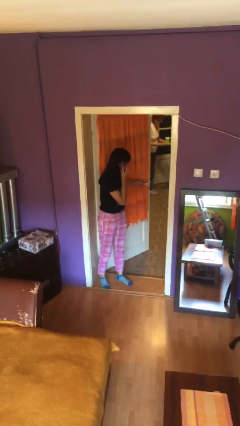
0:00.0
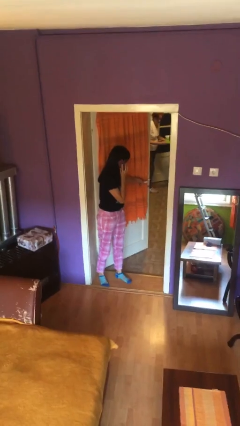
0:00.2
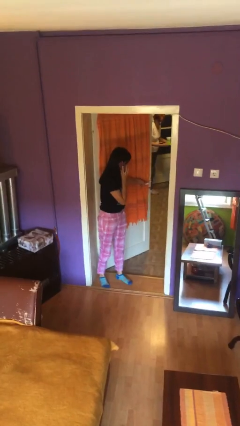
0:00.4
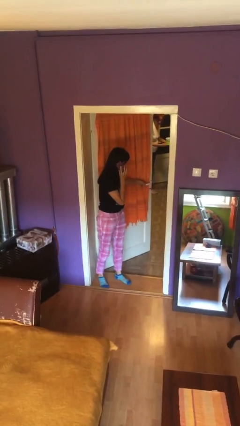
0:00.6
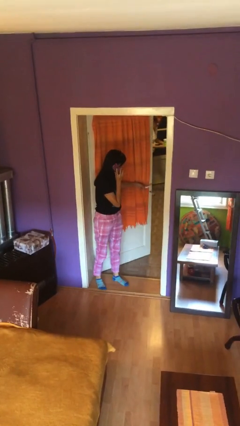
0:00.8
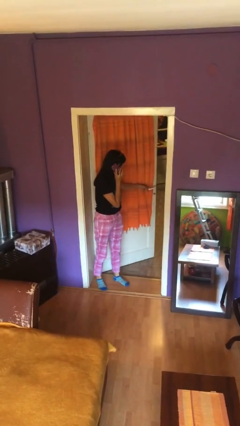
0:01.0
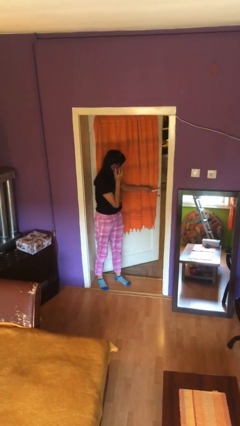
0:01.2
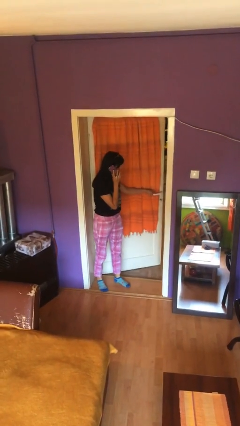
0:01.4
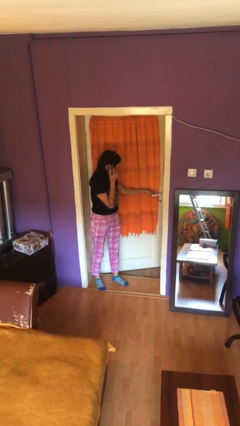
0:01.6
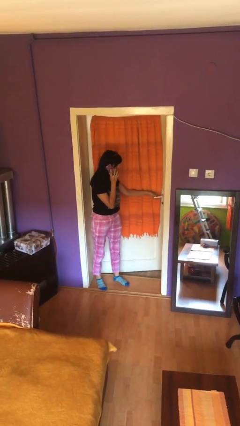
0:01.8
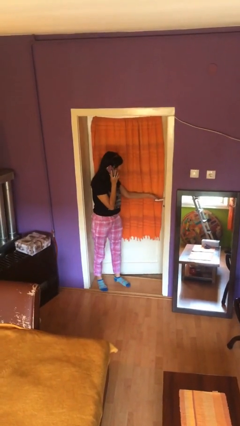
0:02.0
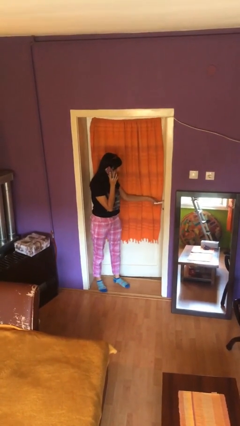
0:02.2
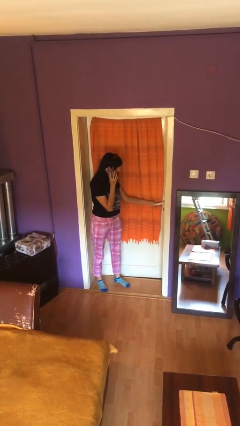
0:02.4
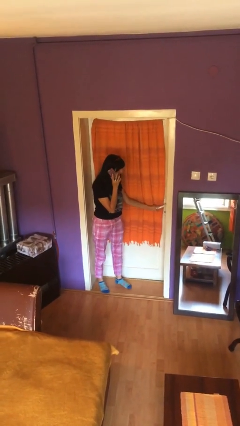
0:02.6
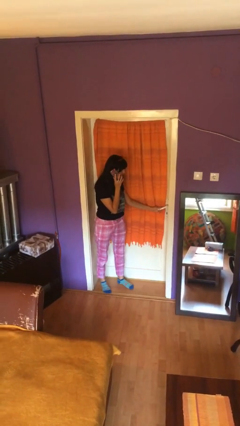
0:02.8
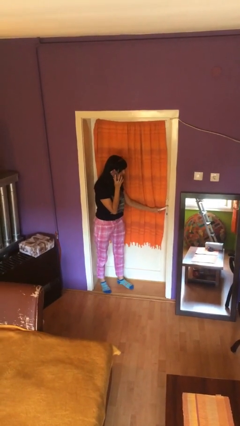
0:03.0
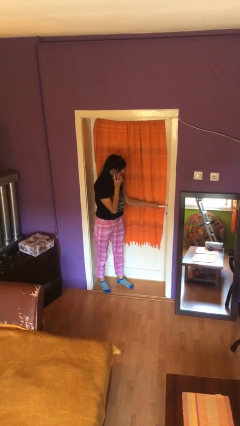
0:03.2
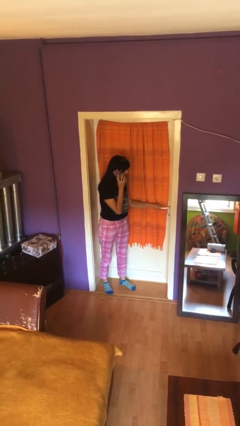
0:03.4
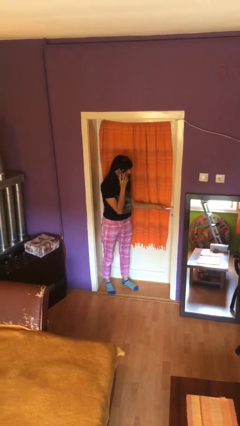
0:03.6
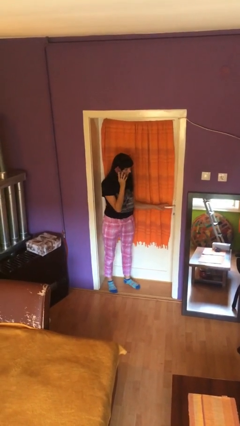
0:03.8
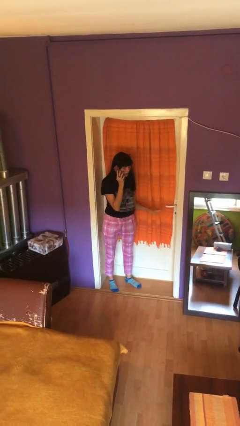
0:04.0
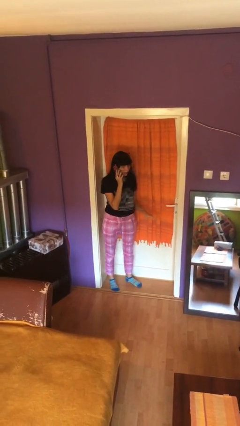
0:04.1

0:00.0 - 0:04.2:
person closes facility door

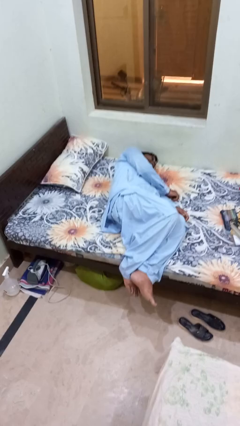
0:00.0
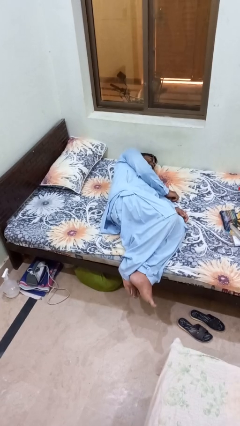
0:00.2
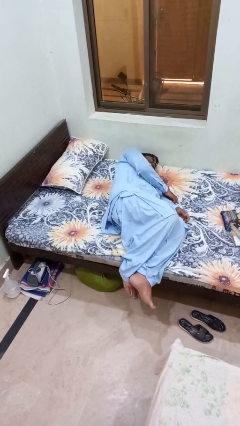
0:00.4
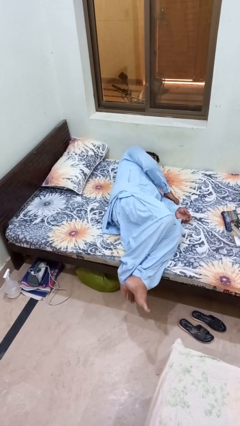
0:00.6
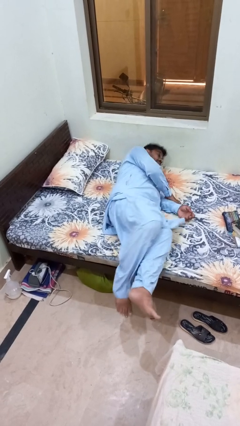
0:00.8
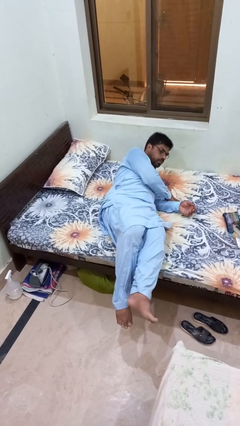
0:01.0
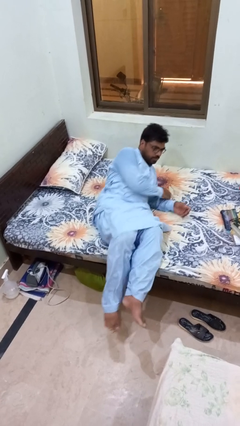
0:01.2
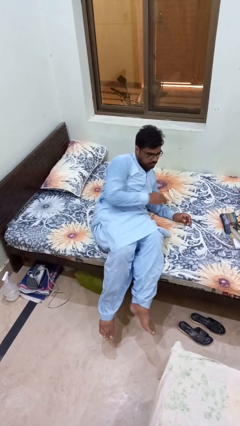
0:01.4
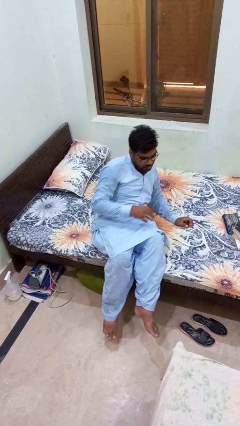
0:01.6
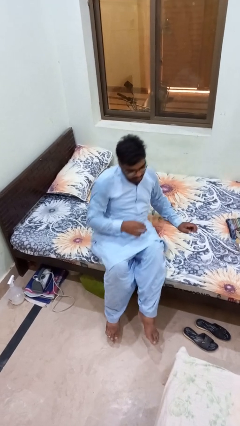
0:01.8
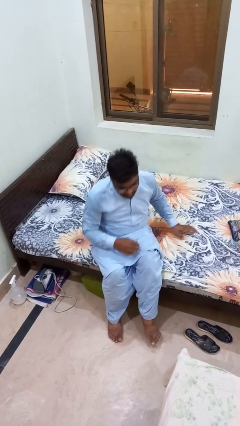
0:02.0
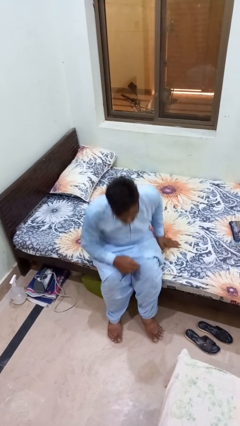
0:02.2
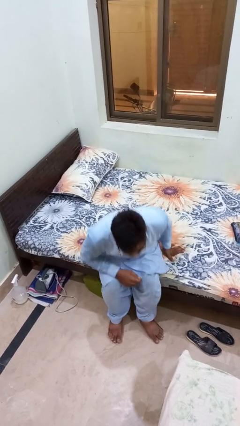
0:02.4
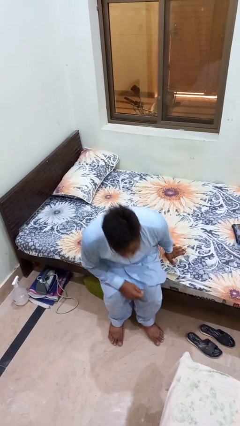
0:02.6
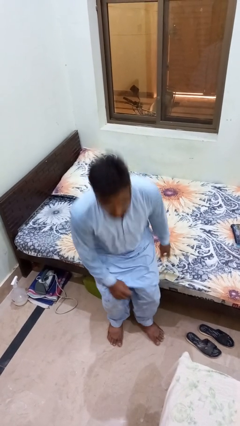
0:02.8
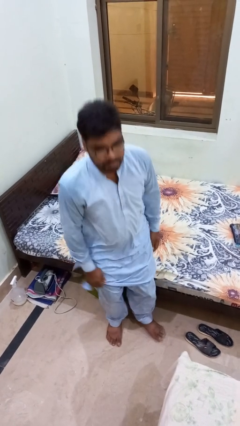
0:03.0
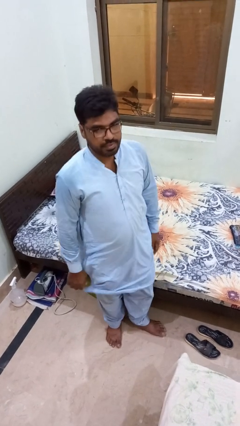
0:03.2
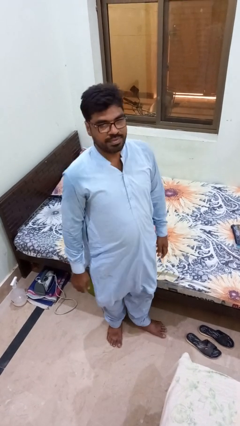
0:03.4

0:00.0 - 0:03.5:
person stands up

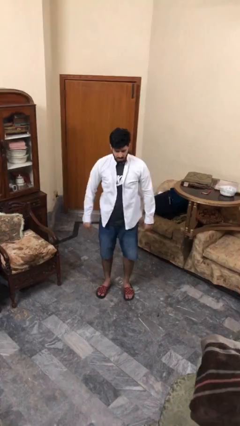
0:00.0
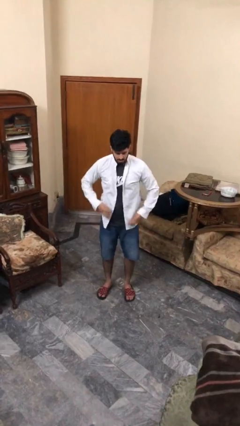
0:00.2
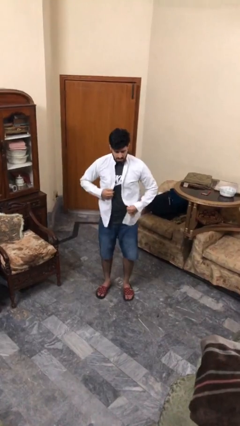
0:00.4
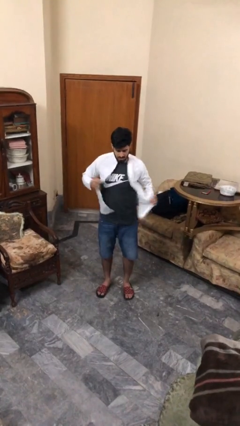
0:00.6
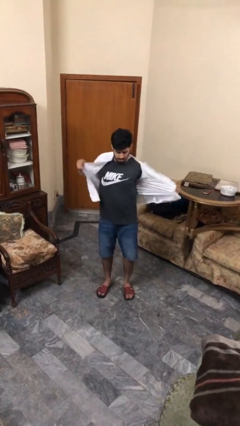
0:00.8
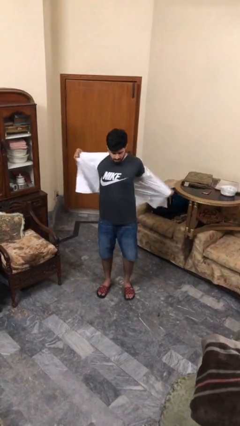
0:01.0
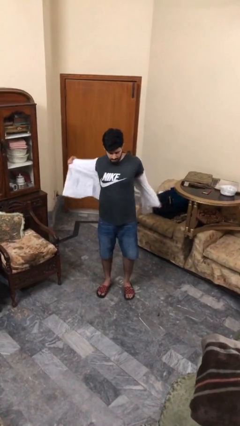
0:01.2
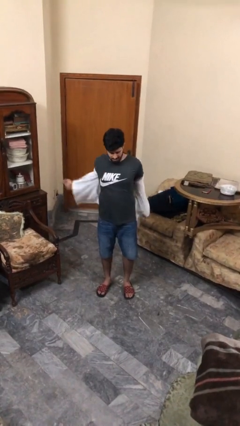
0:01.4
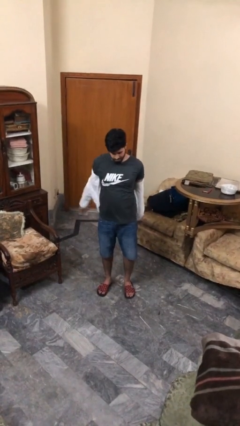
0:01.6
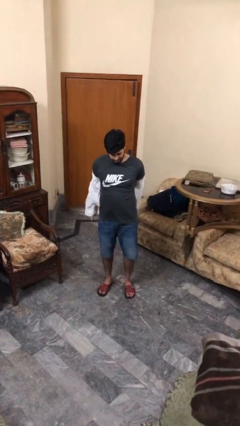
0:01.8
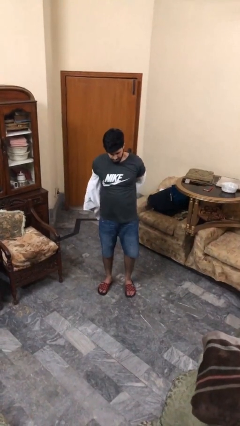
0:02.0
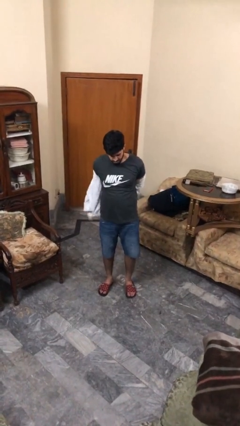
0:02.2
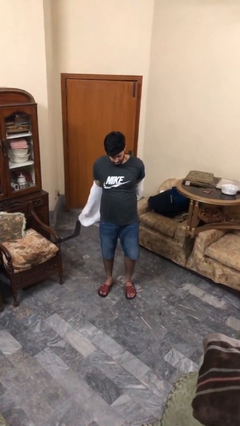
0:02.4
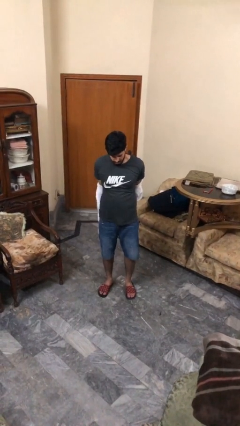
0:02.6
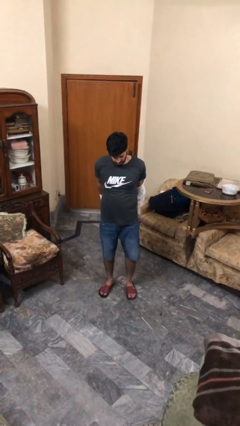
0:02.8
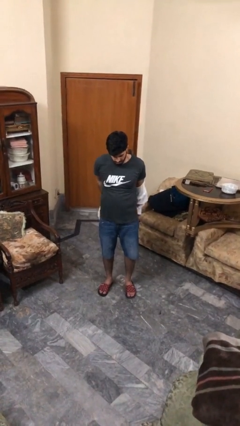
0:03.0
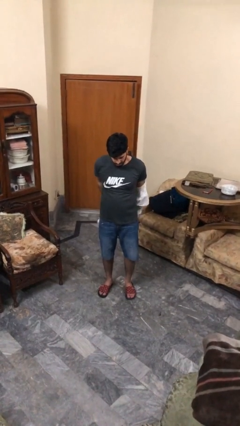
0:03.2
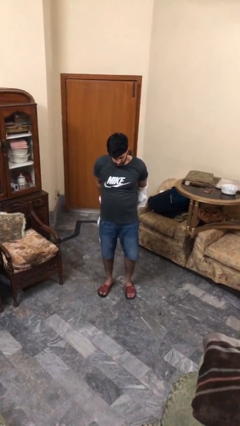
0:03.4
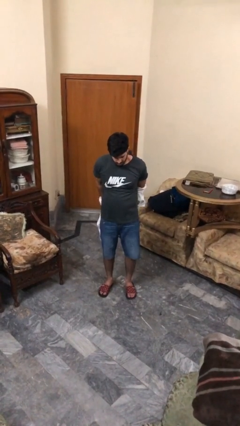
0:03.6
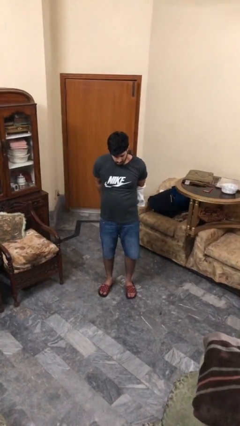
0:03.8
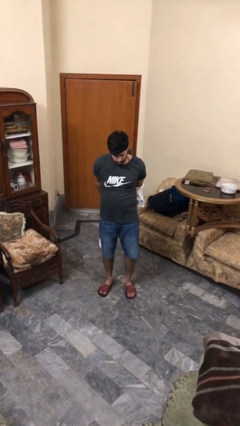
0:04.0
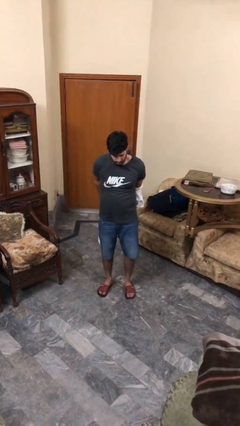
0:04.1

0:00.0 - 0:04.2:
person takes off shirt

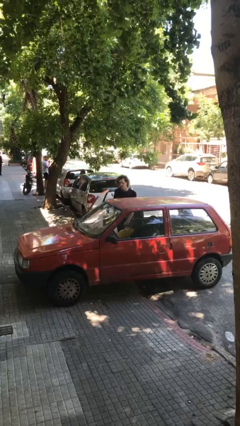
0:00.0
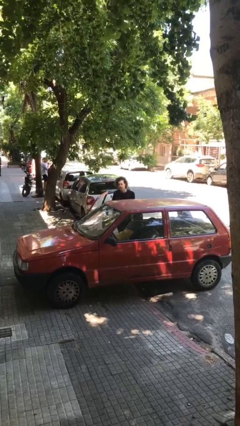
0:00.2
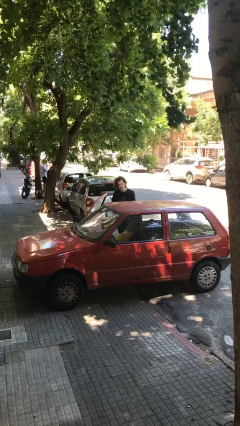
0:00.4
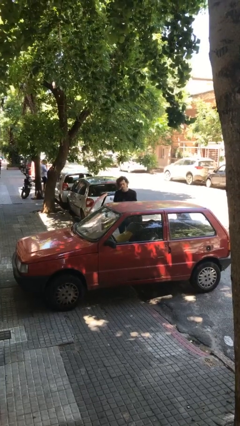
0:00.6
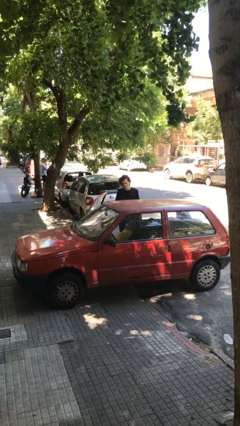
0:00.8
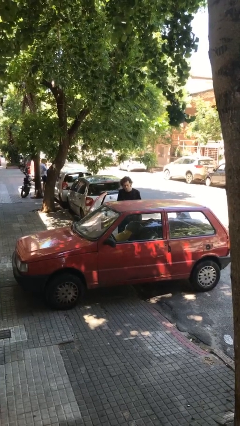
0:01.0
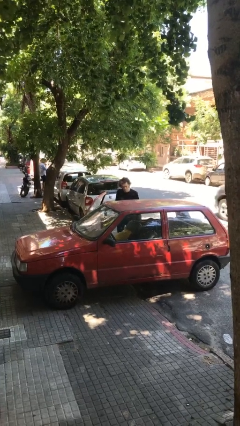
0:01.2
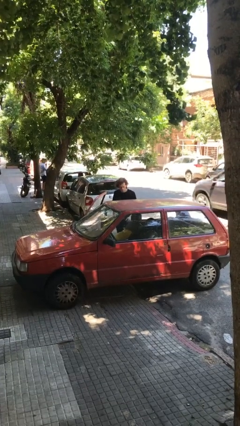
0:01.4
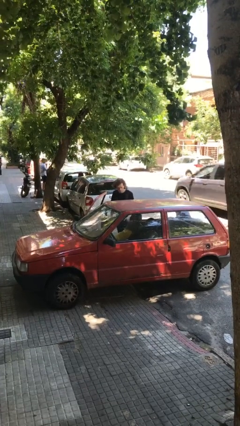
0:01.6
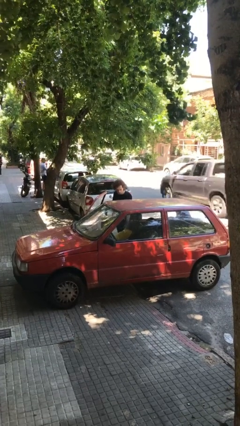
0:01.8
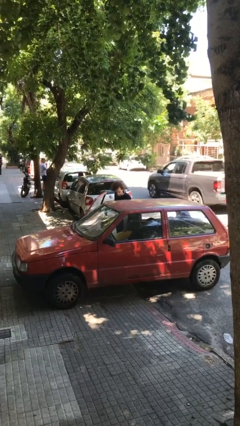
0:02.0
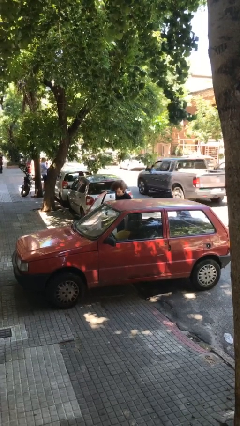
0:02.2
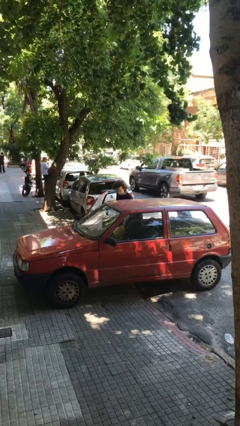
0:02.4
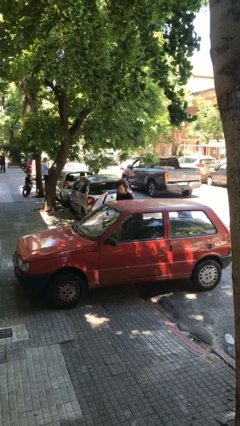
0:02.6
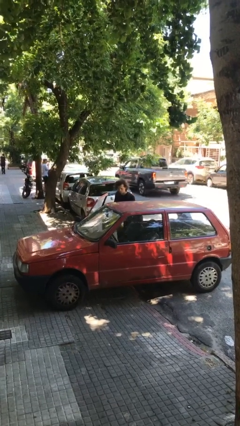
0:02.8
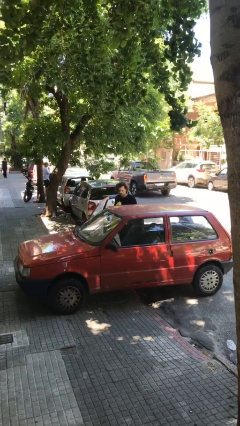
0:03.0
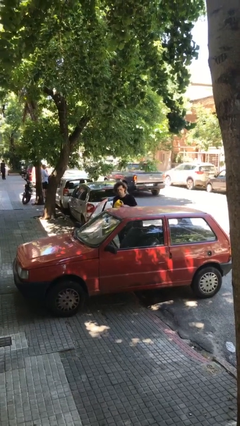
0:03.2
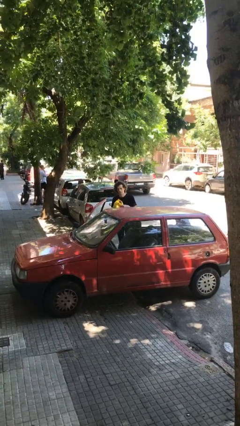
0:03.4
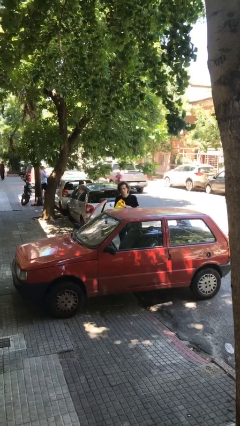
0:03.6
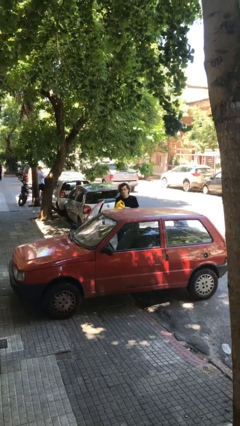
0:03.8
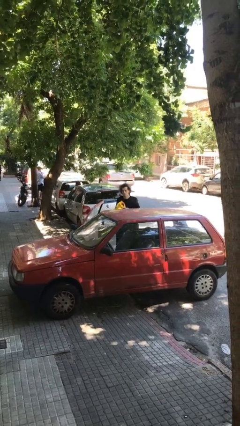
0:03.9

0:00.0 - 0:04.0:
person unloads car

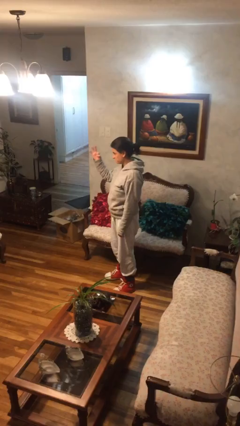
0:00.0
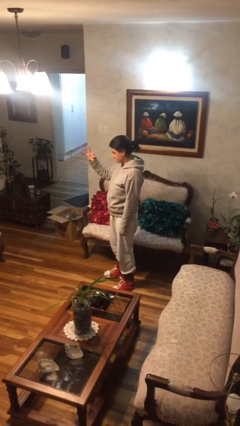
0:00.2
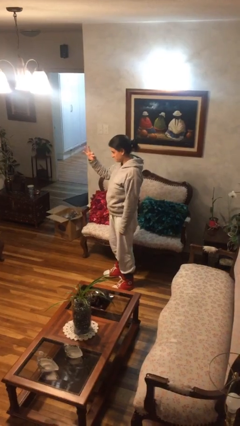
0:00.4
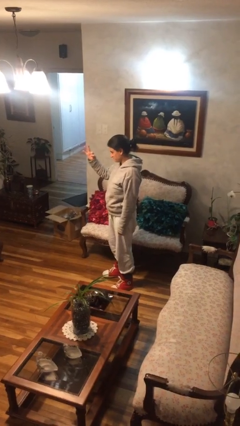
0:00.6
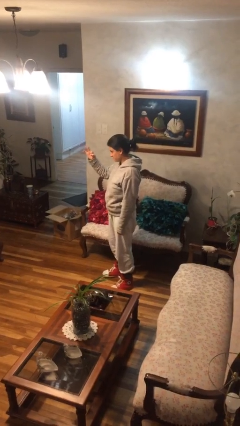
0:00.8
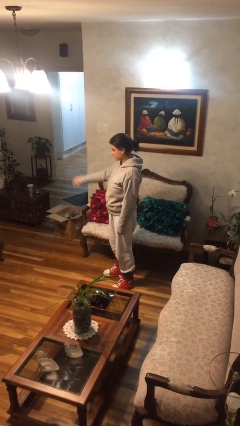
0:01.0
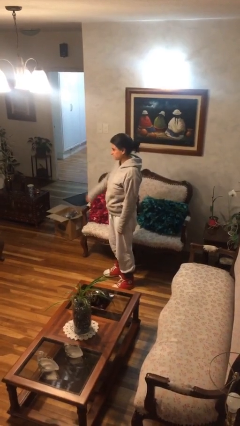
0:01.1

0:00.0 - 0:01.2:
person gestures number three

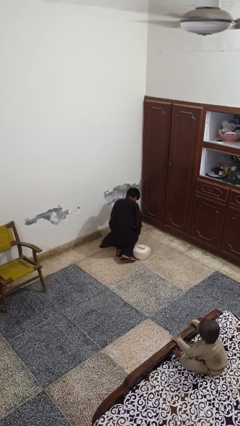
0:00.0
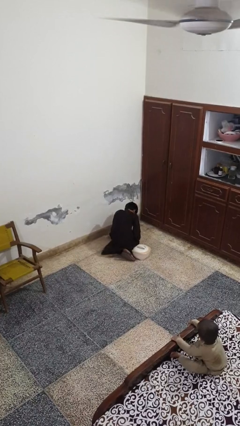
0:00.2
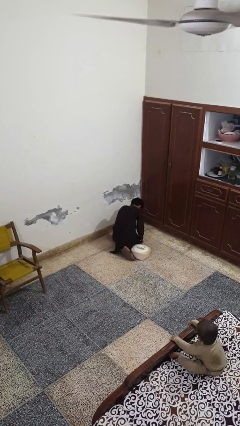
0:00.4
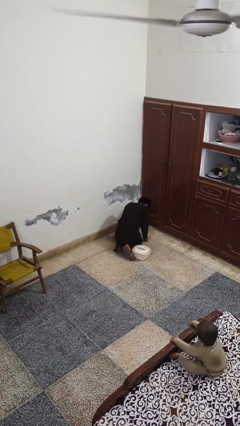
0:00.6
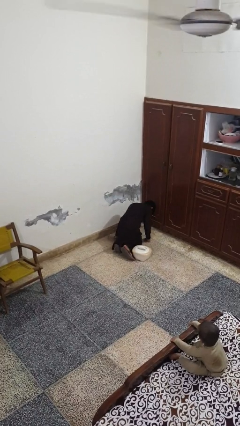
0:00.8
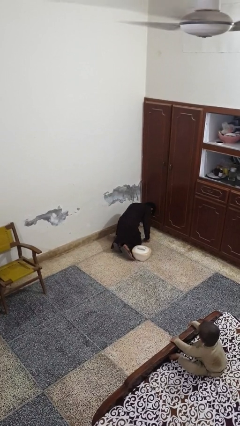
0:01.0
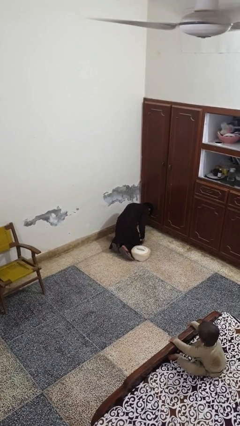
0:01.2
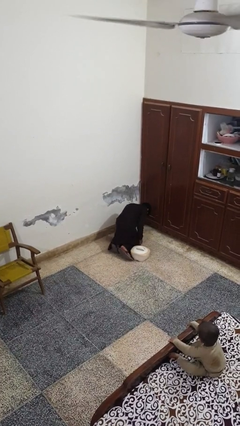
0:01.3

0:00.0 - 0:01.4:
person trips on object on floor
